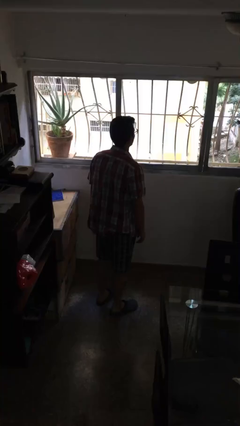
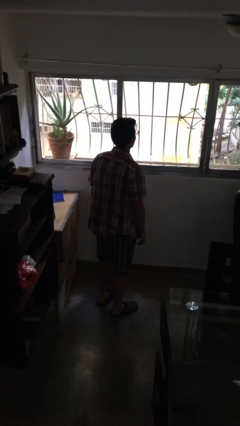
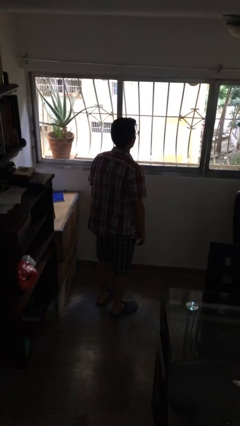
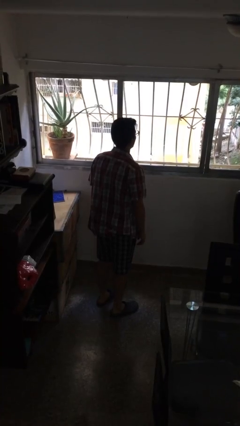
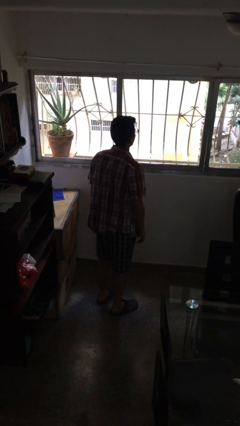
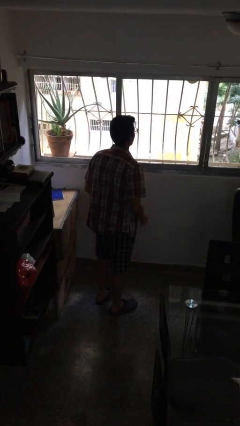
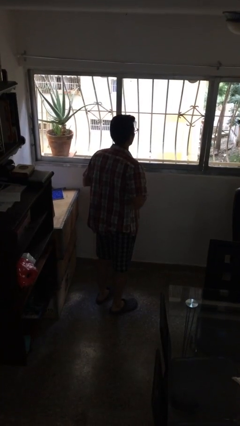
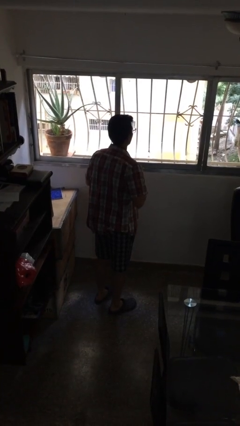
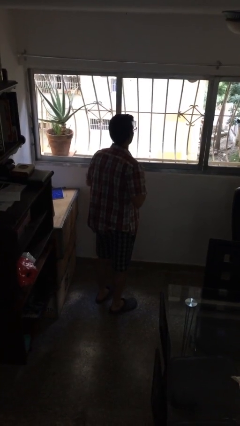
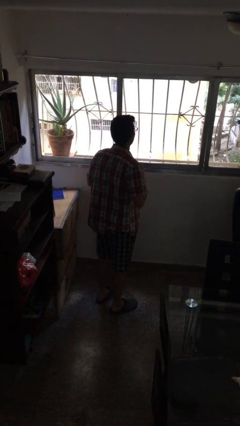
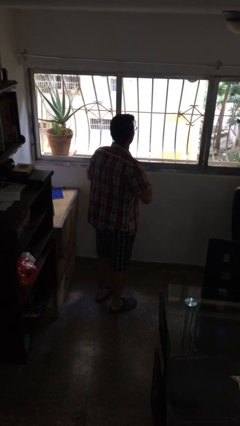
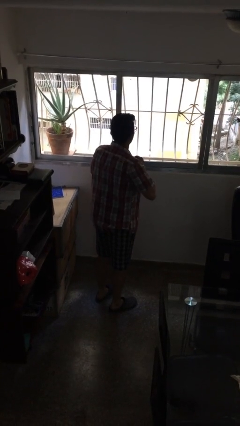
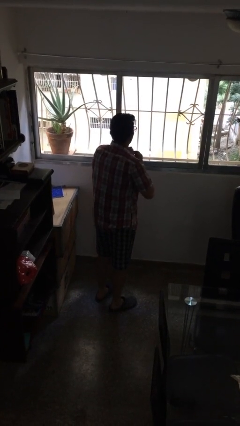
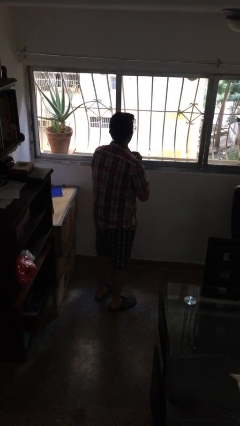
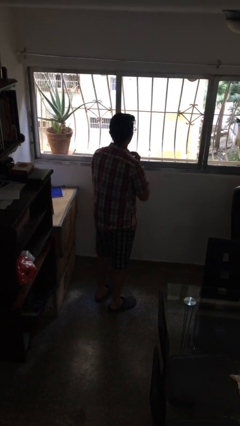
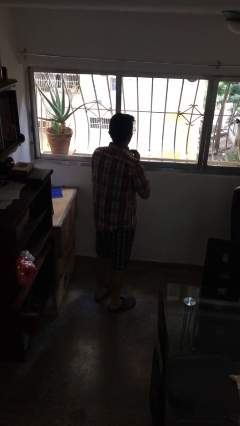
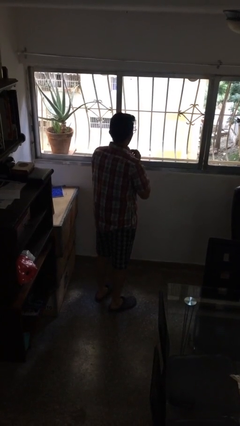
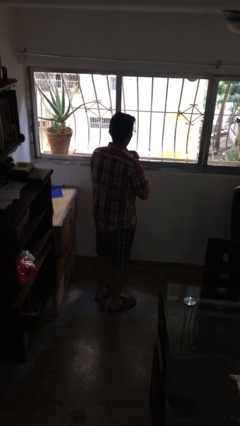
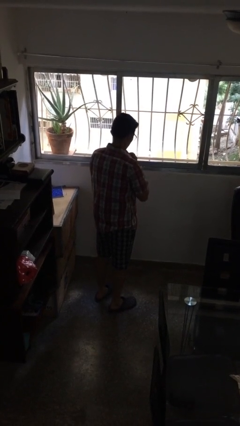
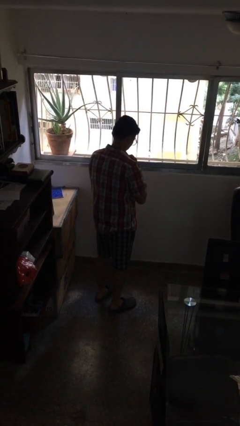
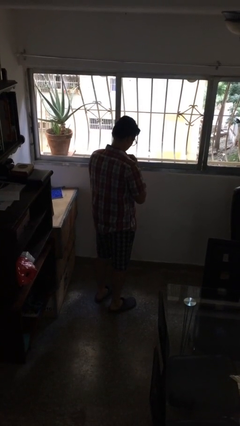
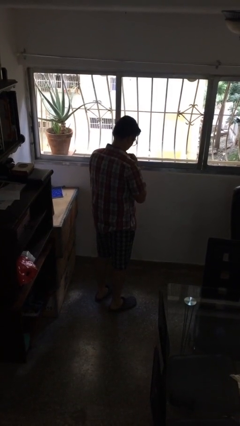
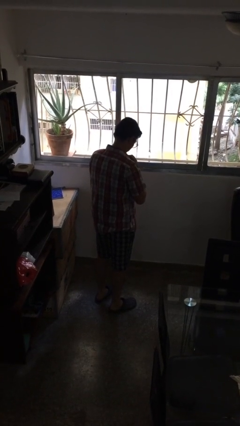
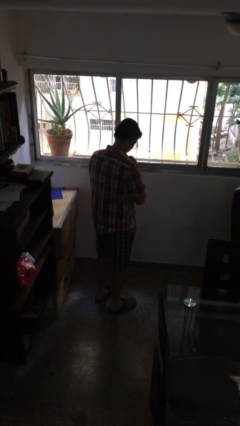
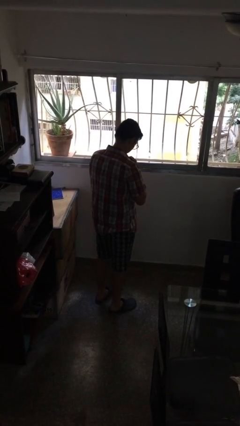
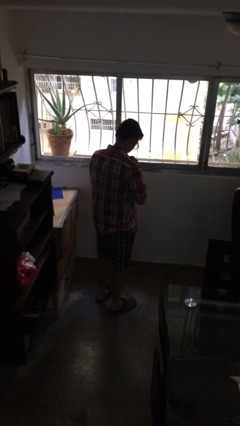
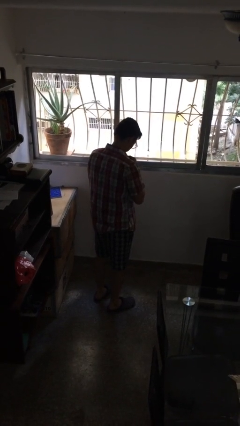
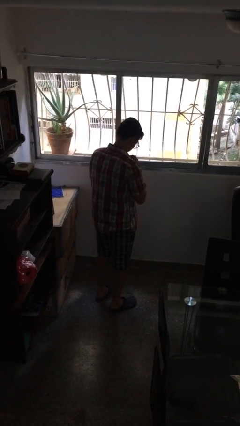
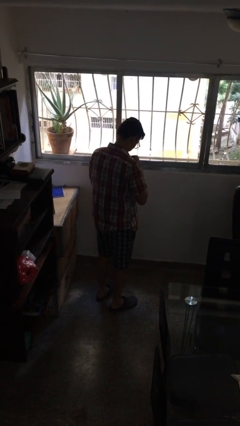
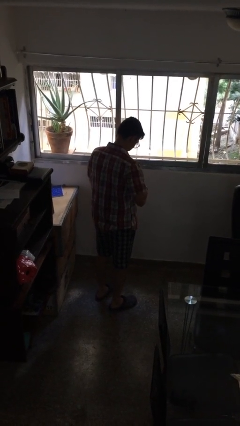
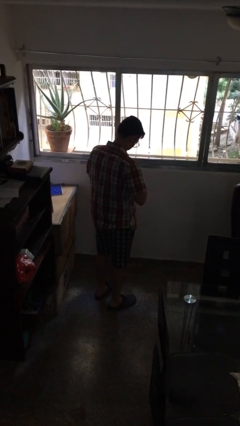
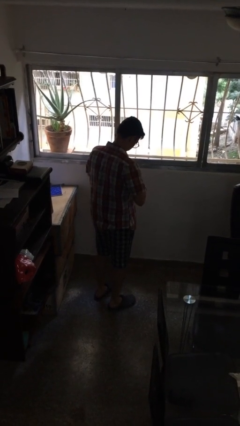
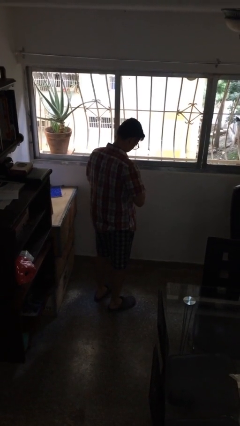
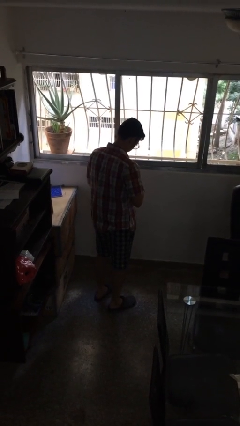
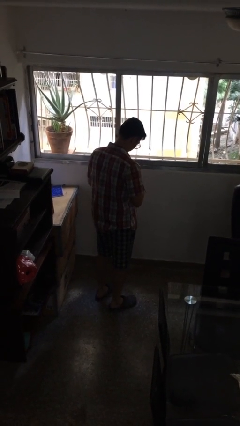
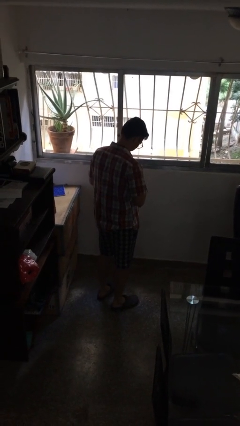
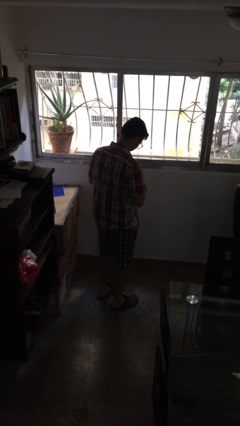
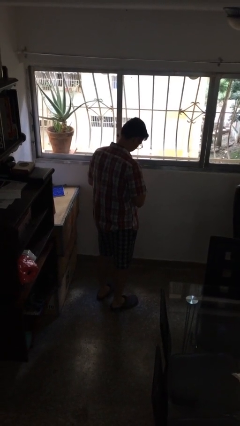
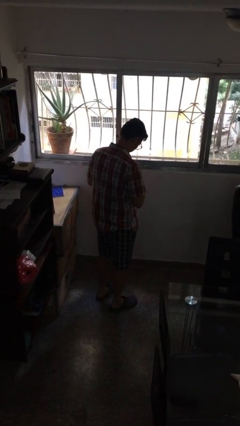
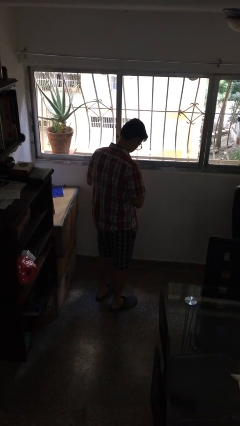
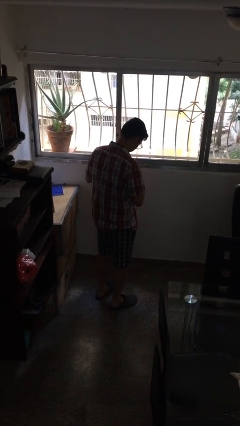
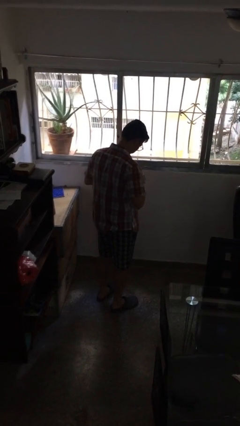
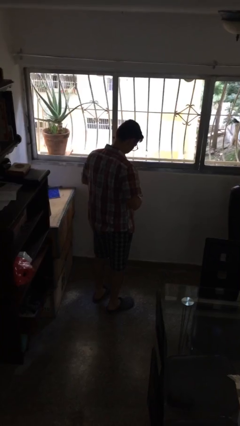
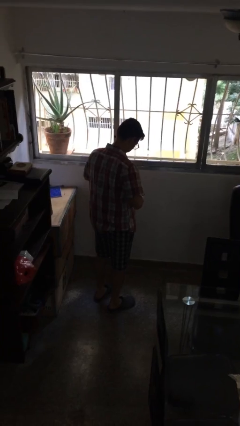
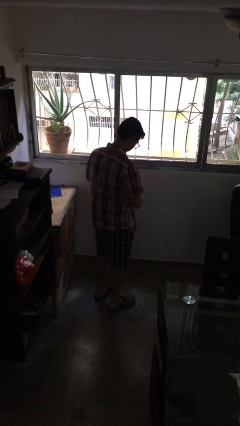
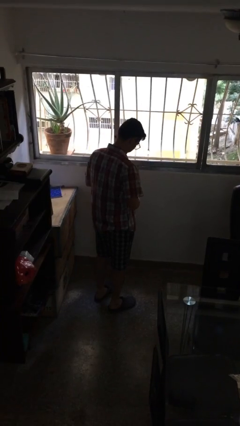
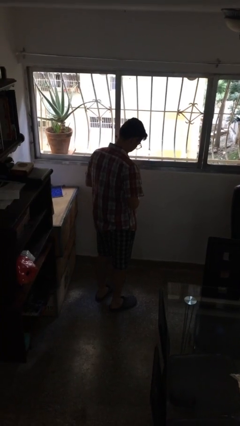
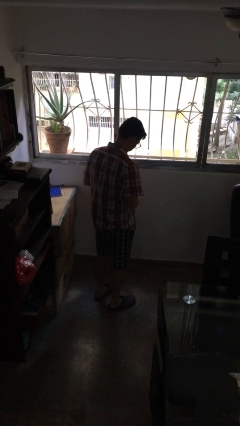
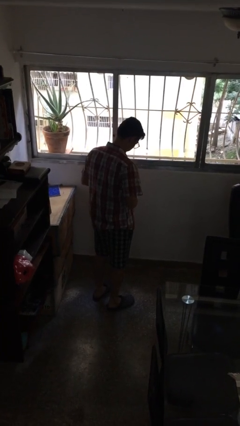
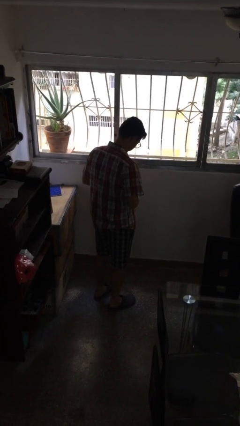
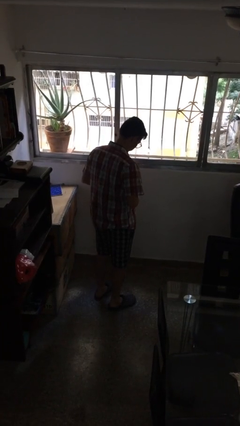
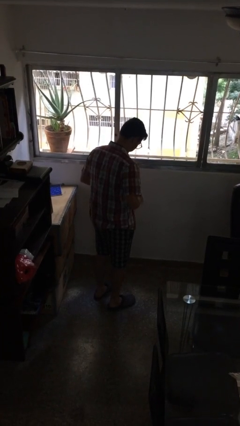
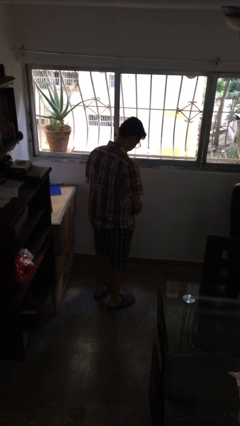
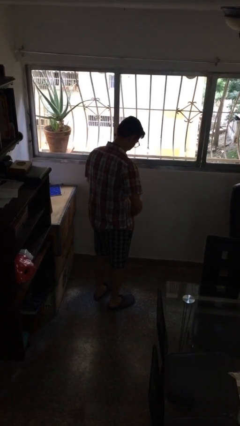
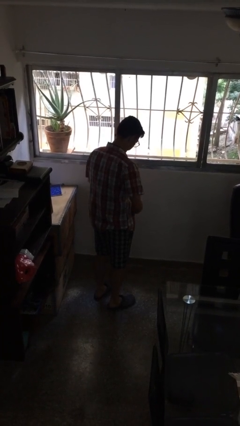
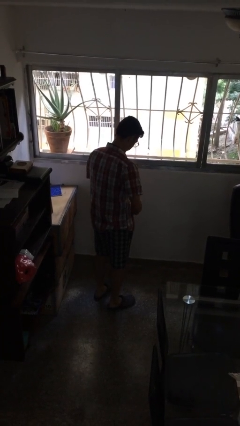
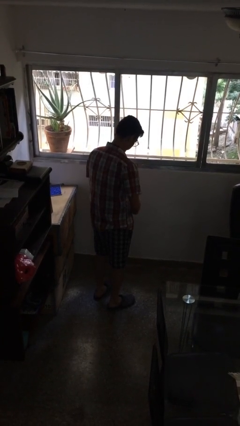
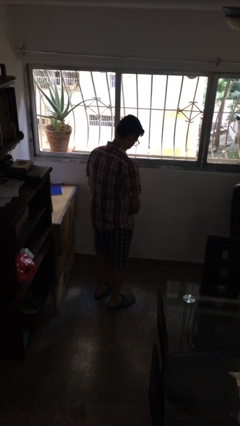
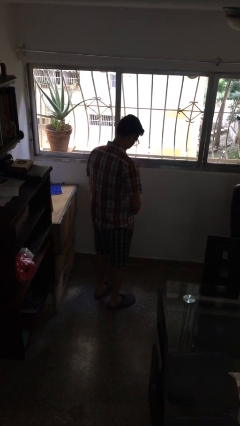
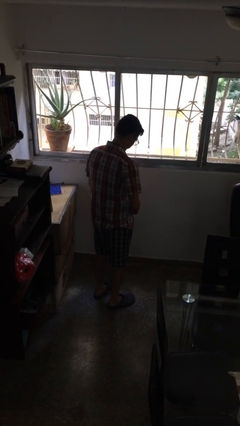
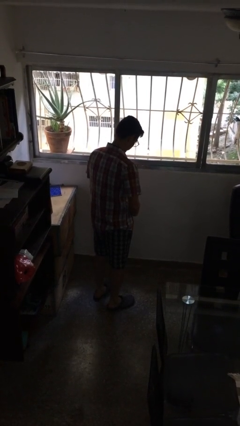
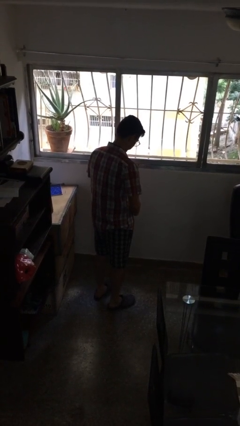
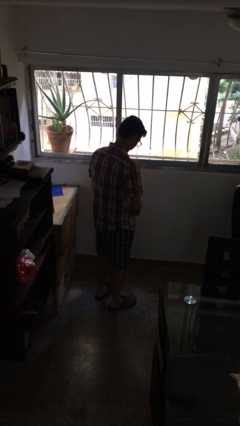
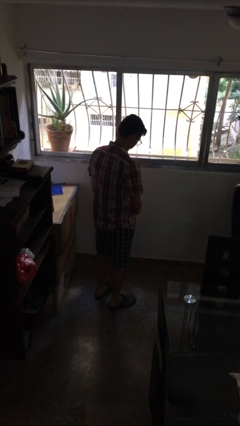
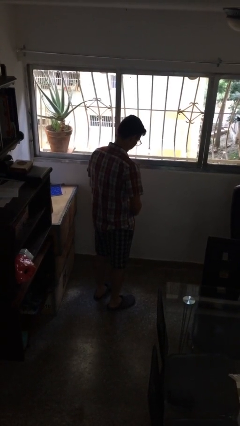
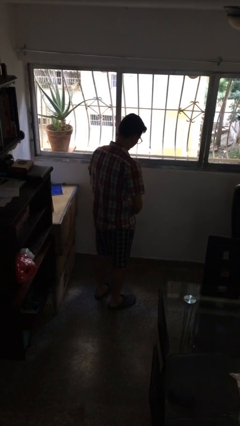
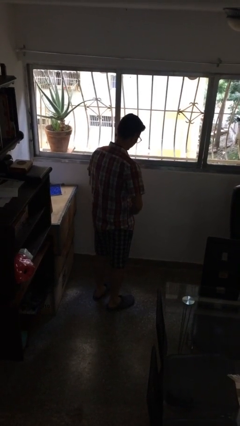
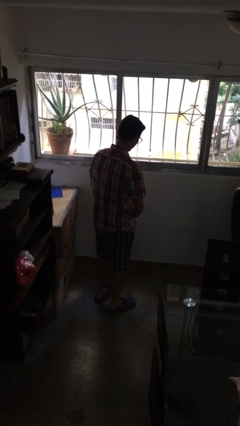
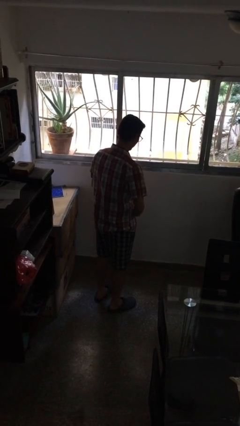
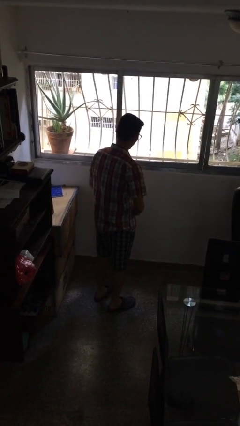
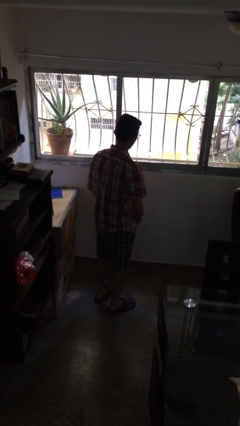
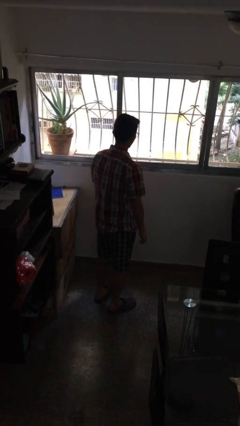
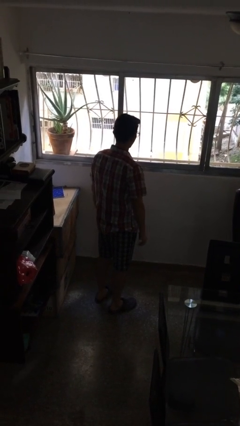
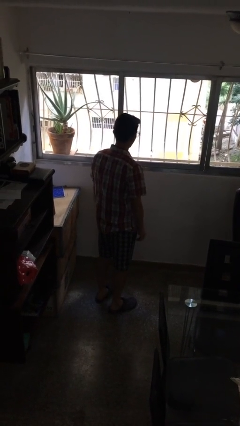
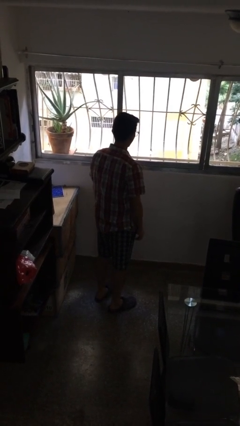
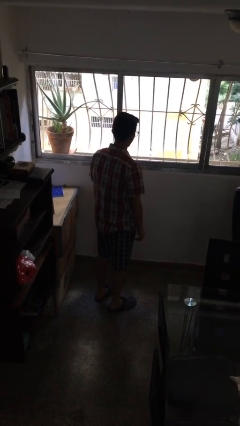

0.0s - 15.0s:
person unbuttons shirt

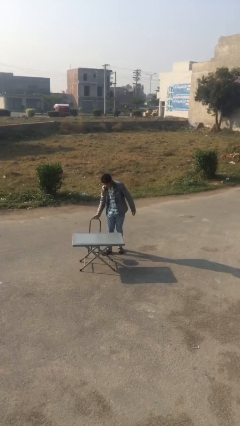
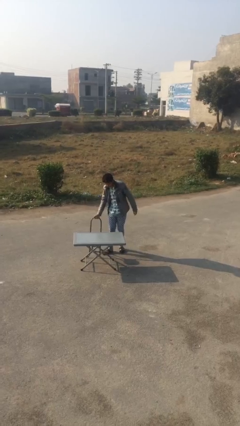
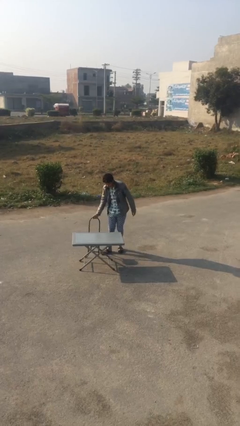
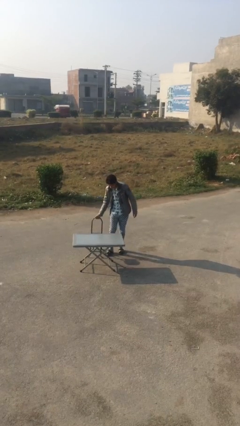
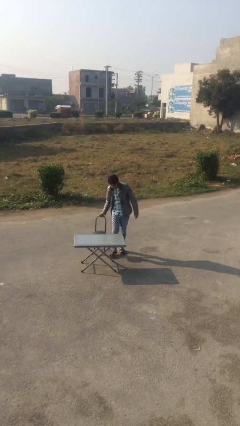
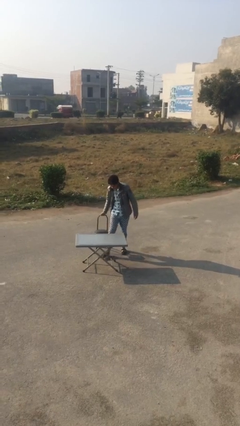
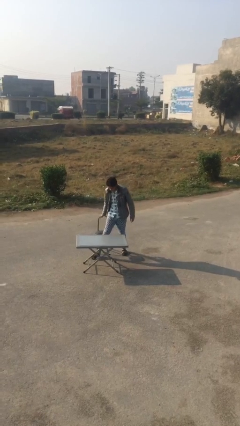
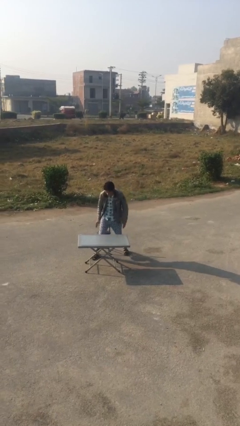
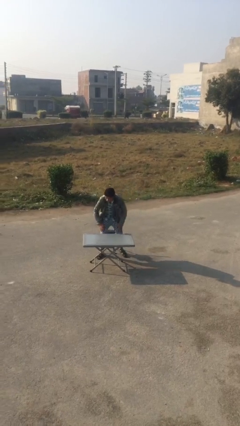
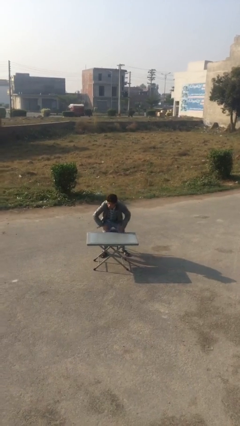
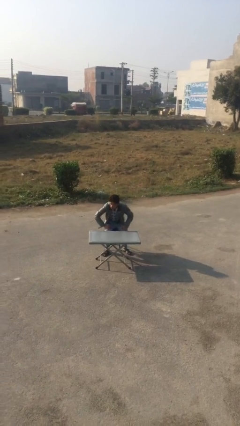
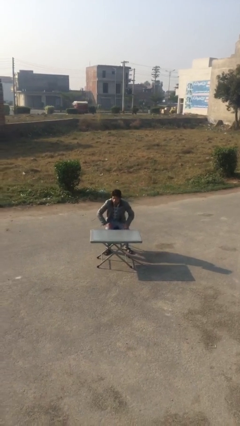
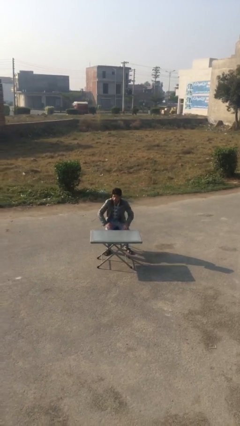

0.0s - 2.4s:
person sits down

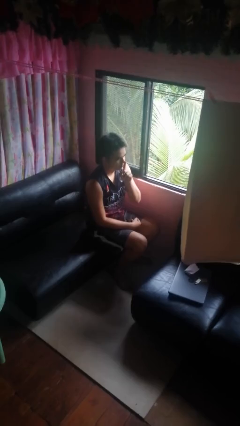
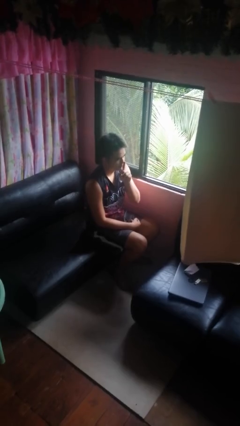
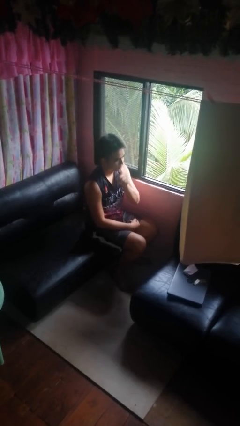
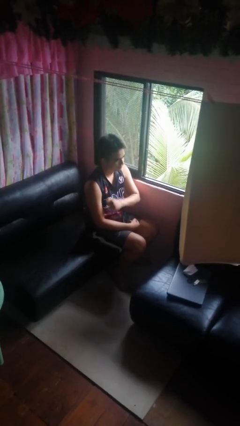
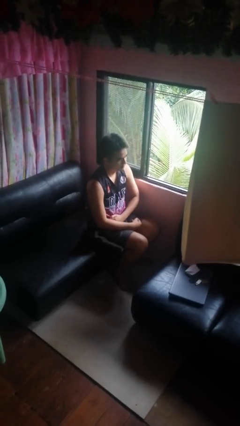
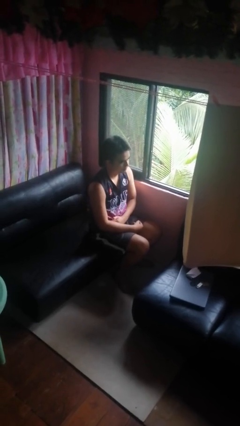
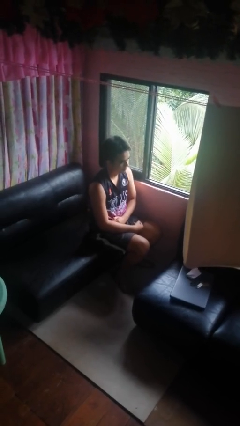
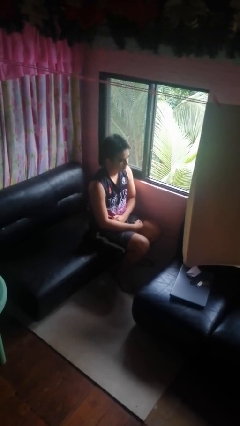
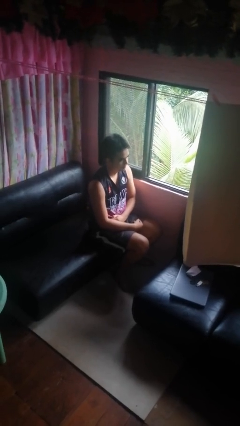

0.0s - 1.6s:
person gestures be quiet
